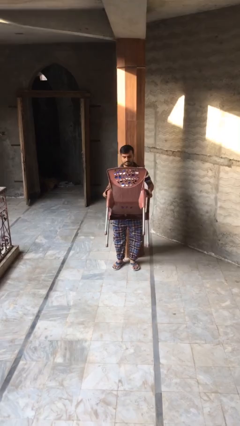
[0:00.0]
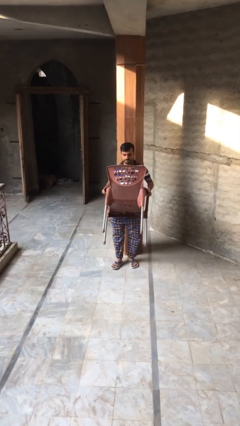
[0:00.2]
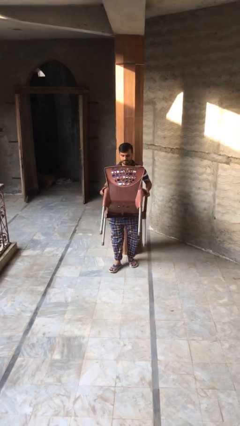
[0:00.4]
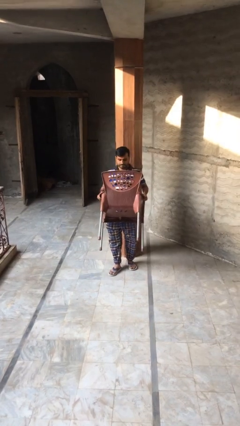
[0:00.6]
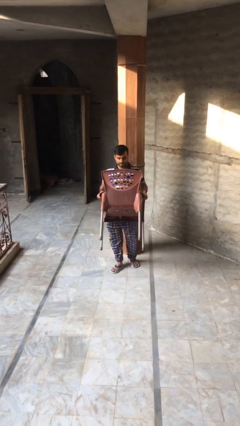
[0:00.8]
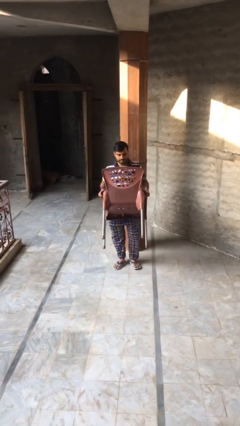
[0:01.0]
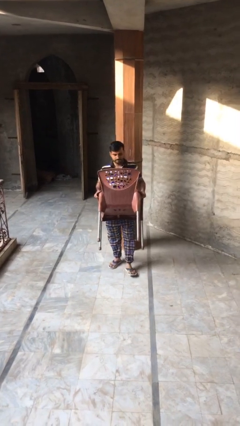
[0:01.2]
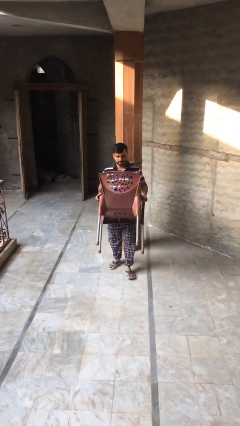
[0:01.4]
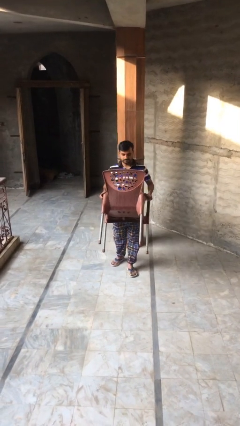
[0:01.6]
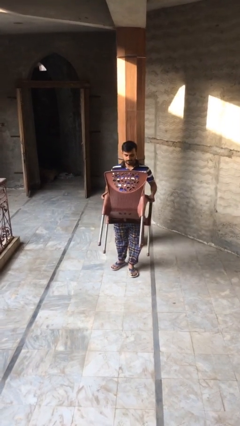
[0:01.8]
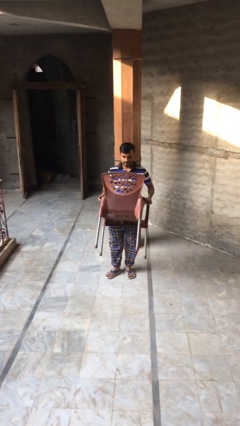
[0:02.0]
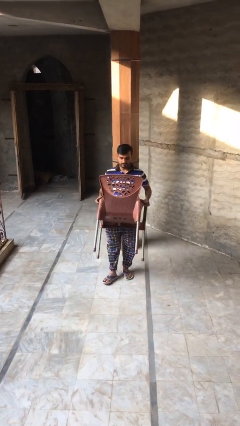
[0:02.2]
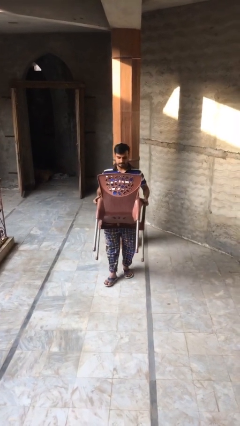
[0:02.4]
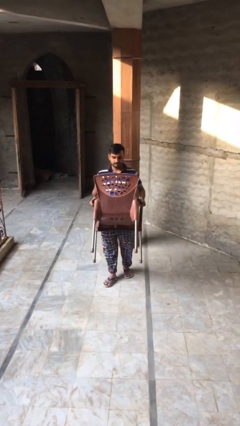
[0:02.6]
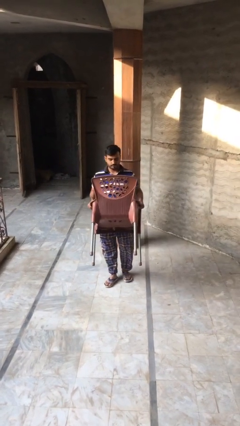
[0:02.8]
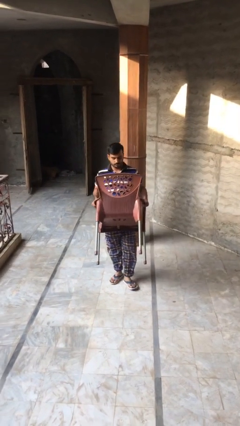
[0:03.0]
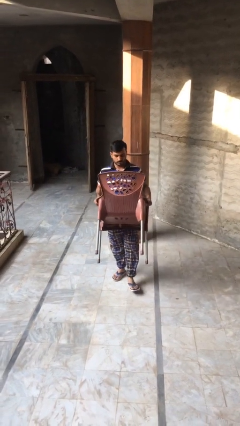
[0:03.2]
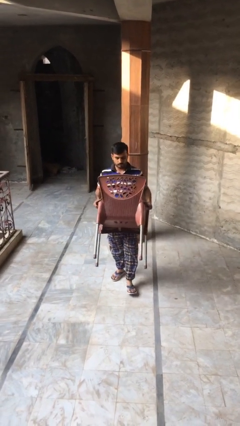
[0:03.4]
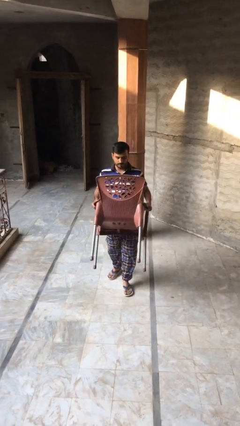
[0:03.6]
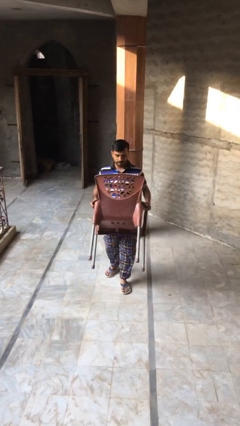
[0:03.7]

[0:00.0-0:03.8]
person carries heavy object

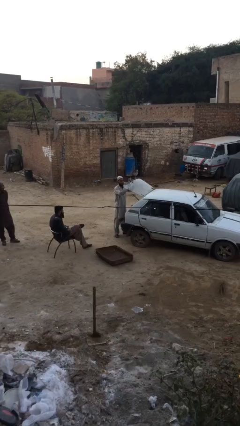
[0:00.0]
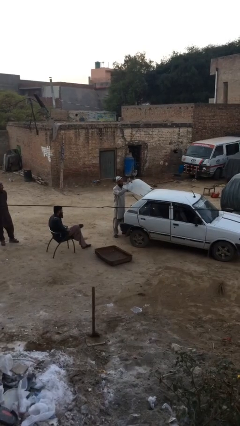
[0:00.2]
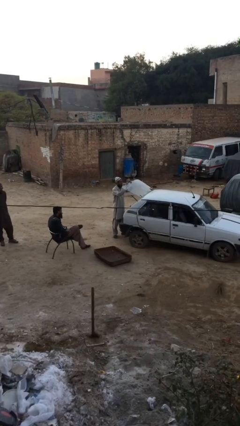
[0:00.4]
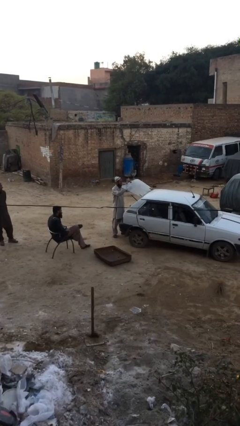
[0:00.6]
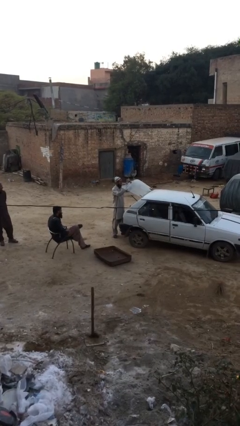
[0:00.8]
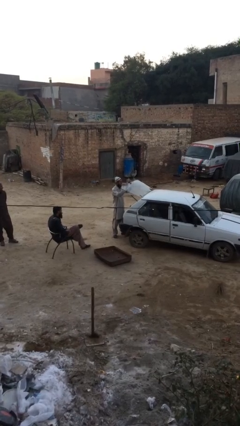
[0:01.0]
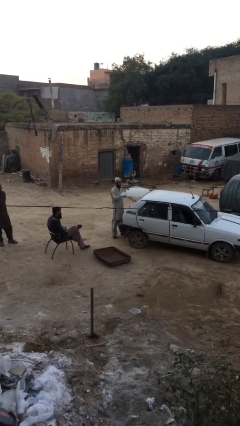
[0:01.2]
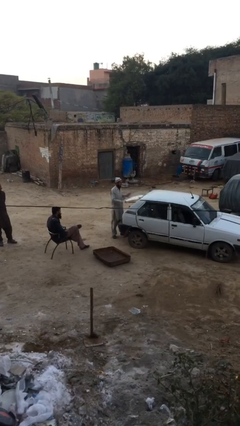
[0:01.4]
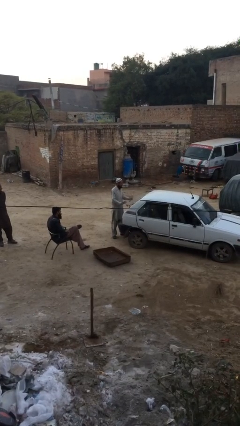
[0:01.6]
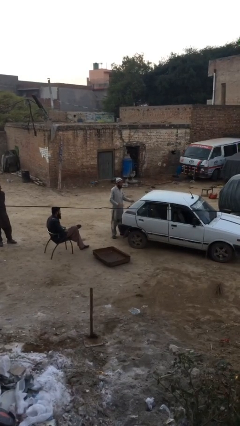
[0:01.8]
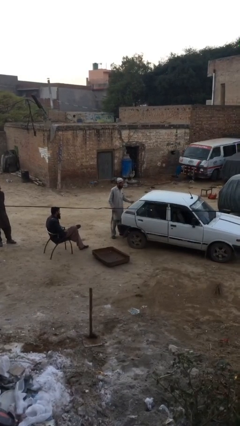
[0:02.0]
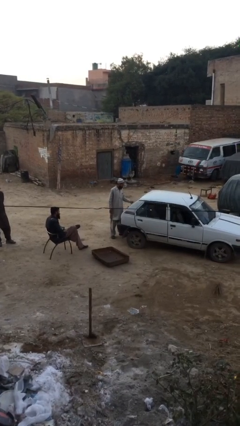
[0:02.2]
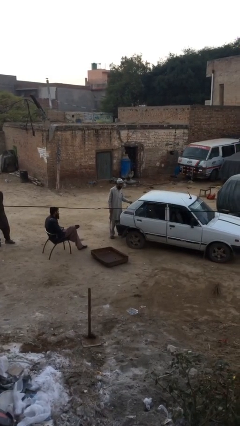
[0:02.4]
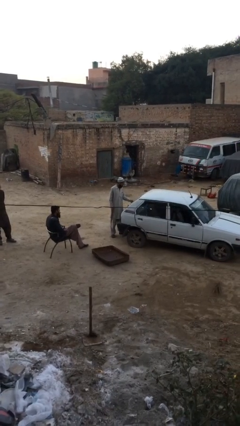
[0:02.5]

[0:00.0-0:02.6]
person closes car trunk

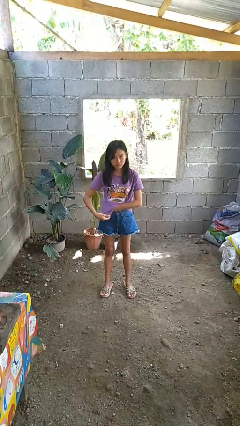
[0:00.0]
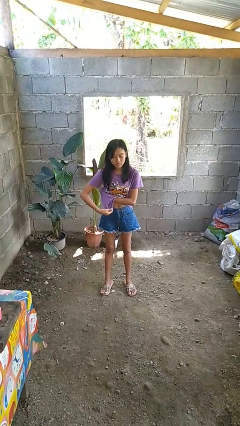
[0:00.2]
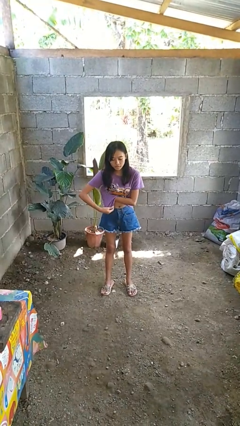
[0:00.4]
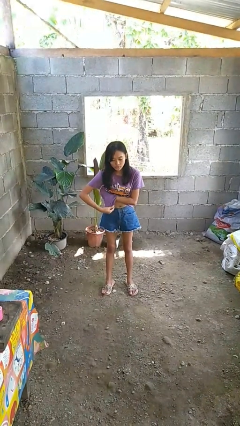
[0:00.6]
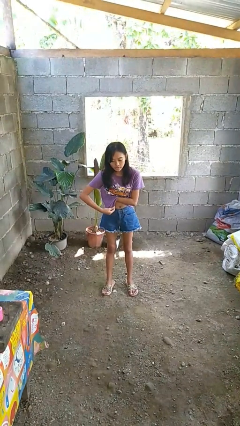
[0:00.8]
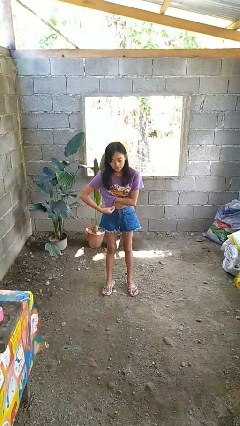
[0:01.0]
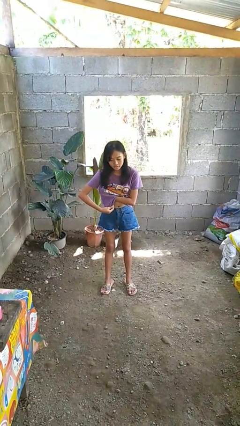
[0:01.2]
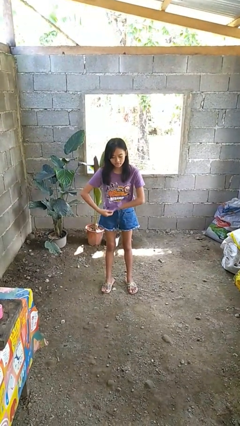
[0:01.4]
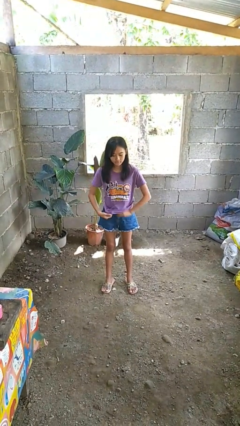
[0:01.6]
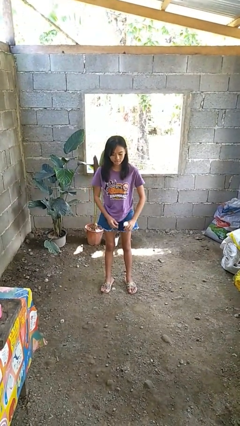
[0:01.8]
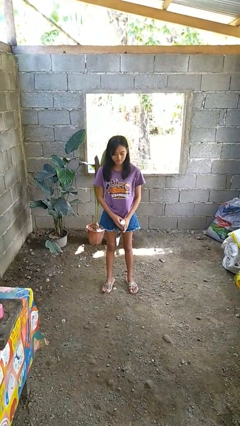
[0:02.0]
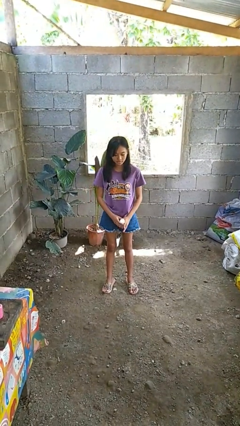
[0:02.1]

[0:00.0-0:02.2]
person applies deodorant

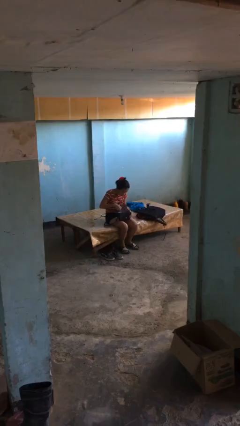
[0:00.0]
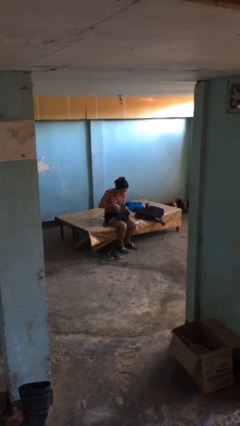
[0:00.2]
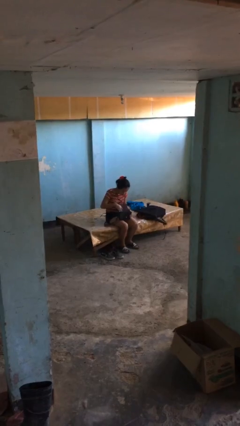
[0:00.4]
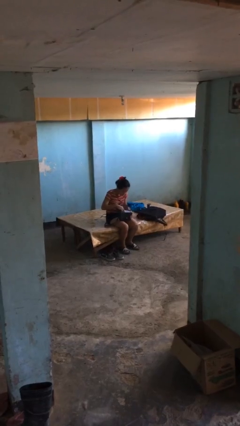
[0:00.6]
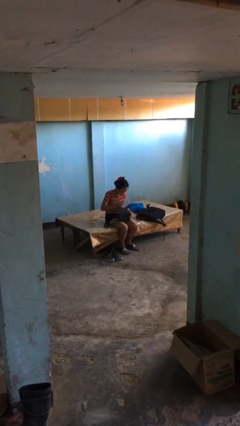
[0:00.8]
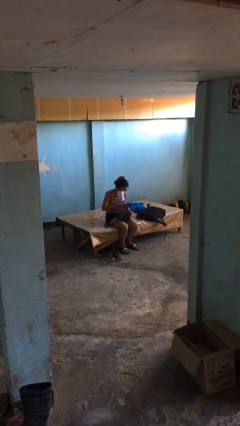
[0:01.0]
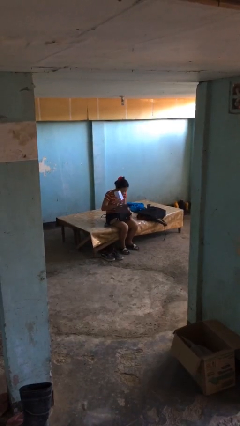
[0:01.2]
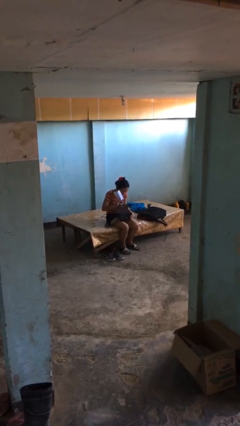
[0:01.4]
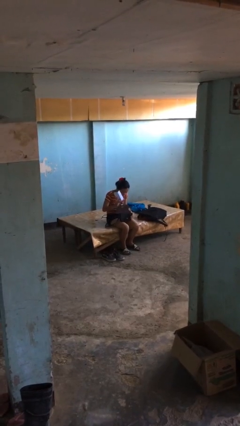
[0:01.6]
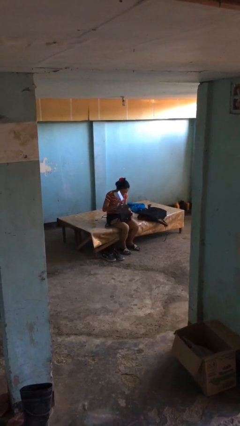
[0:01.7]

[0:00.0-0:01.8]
person takes object from purse

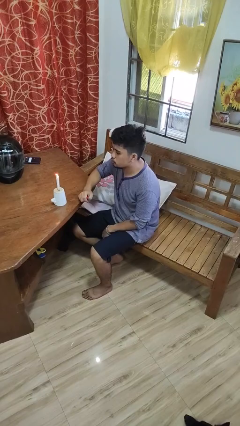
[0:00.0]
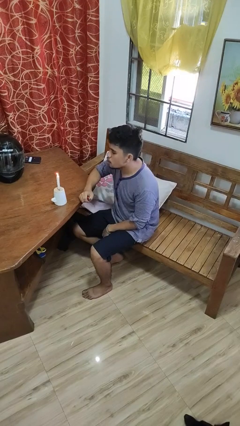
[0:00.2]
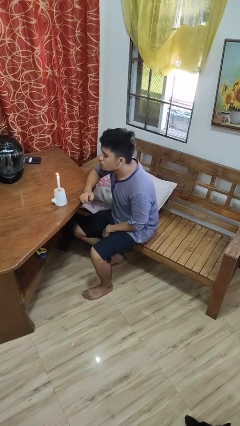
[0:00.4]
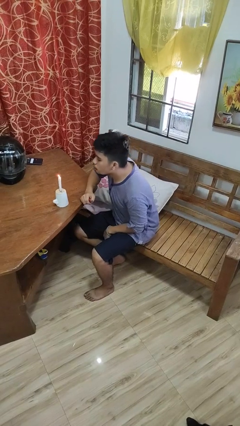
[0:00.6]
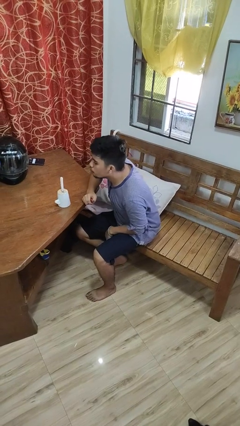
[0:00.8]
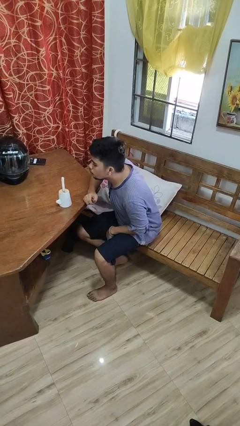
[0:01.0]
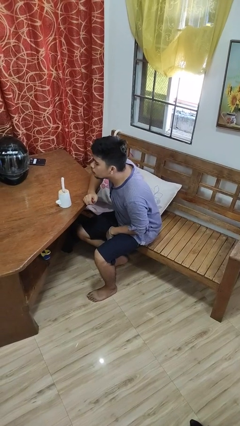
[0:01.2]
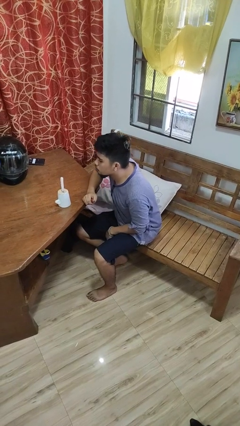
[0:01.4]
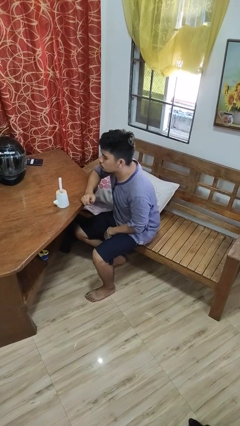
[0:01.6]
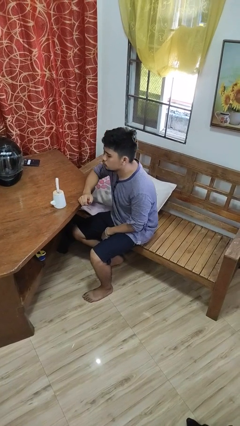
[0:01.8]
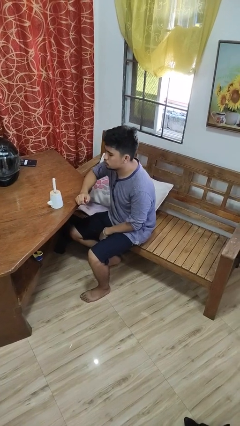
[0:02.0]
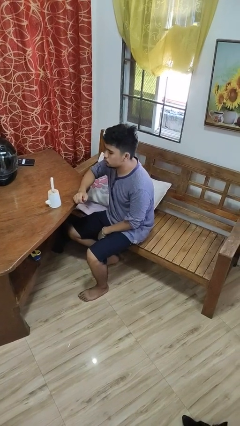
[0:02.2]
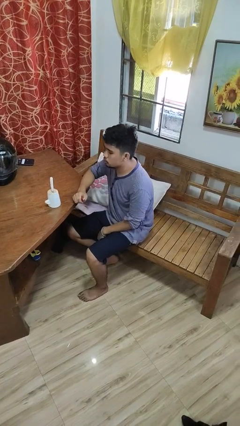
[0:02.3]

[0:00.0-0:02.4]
person extinguishes candle

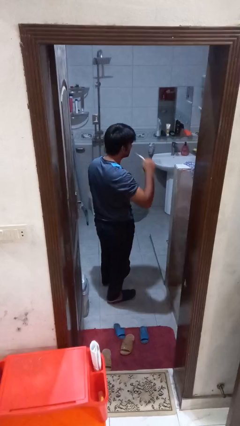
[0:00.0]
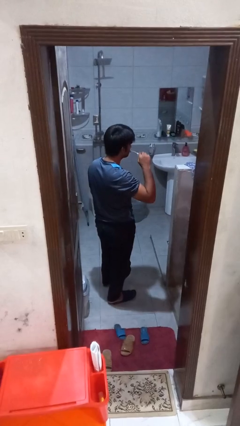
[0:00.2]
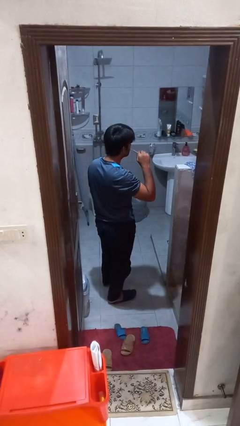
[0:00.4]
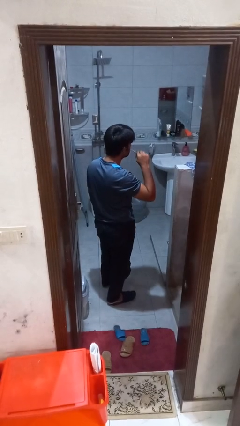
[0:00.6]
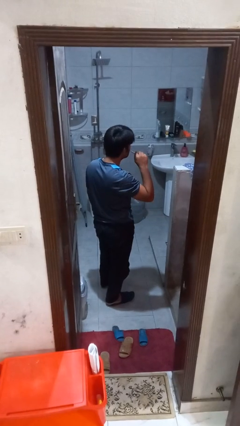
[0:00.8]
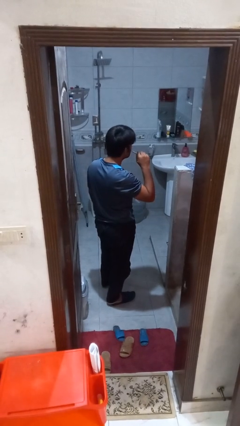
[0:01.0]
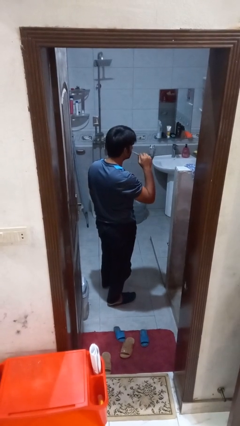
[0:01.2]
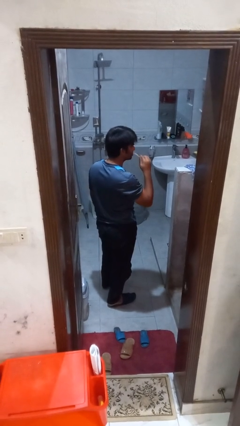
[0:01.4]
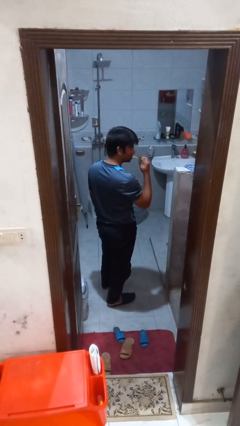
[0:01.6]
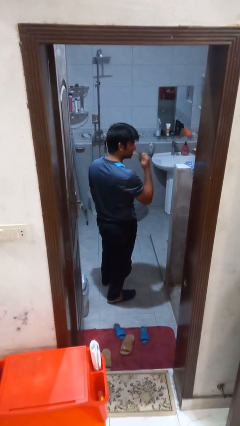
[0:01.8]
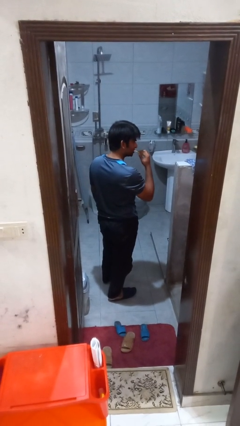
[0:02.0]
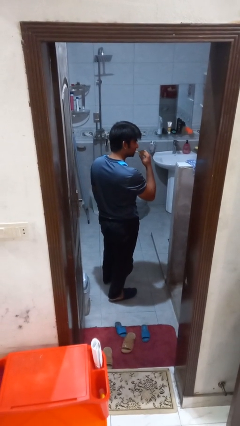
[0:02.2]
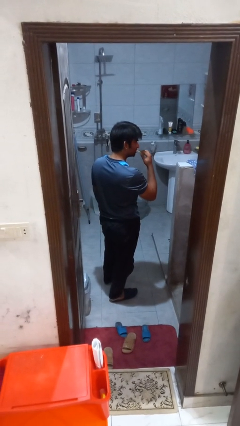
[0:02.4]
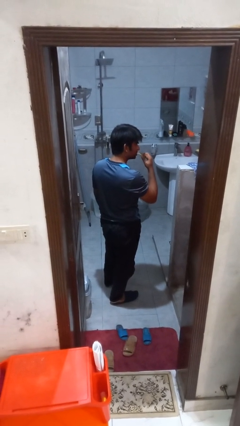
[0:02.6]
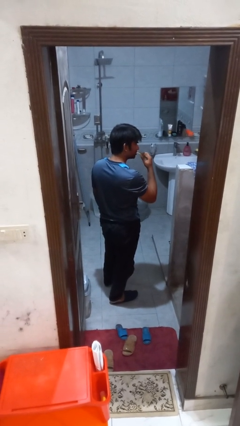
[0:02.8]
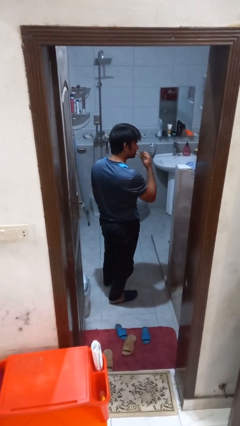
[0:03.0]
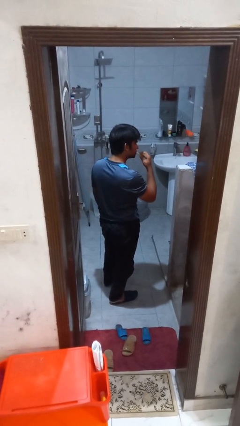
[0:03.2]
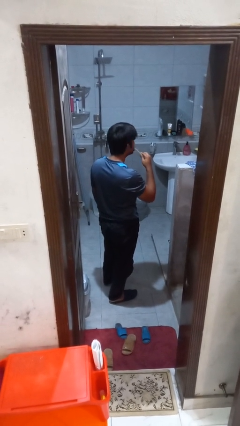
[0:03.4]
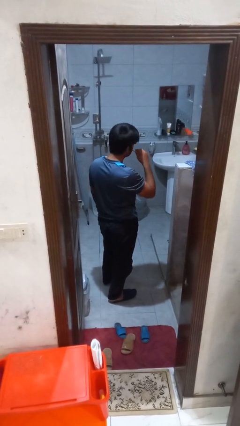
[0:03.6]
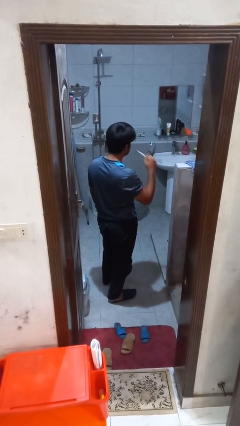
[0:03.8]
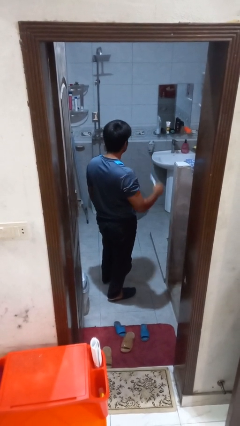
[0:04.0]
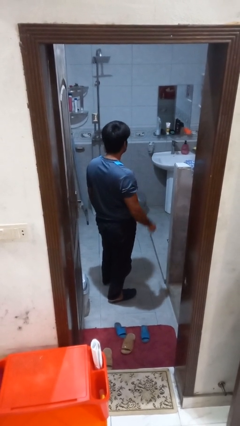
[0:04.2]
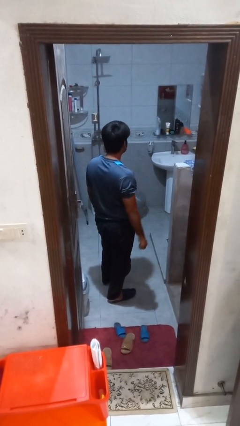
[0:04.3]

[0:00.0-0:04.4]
person brushes teeth

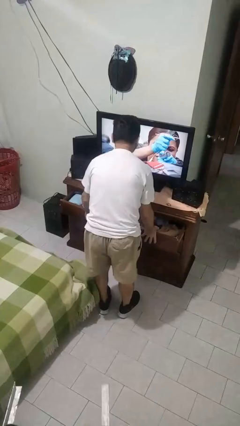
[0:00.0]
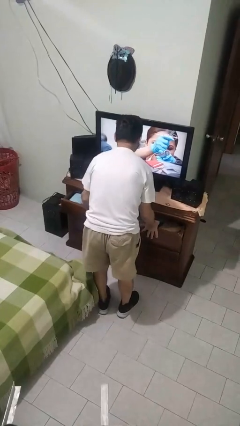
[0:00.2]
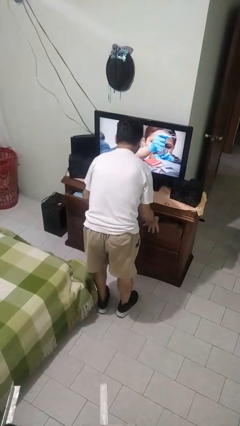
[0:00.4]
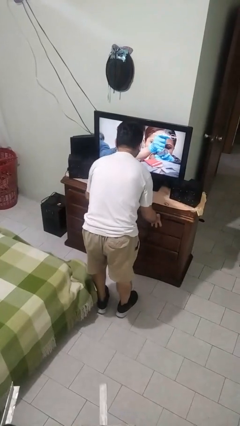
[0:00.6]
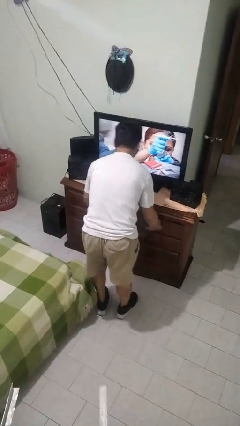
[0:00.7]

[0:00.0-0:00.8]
person closes dresser drawer
